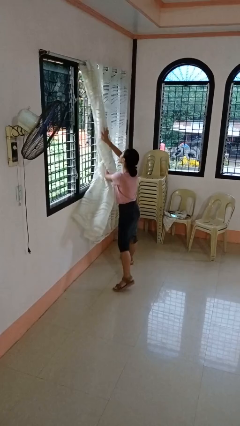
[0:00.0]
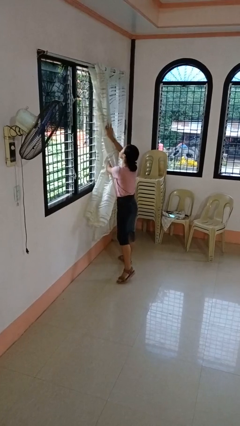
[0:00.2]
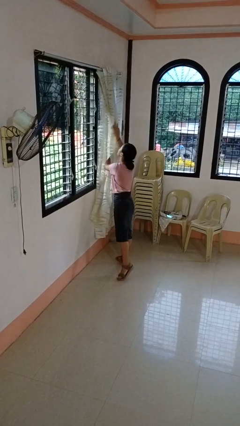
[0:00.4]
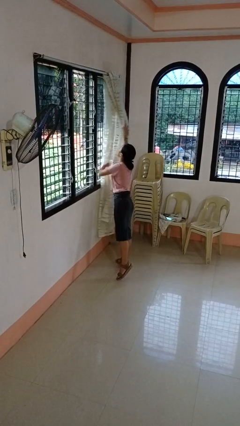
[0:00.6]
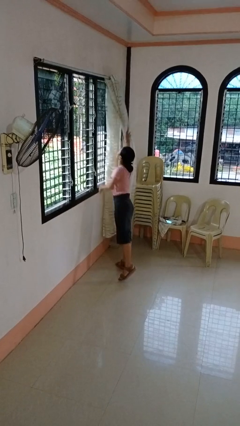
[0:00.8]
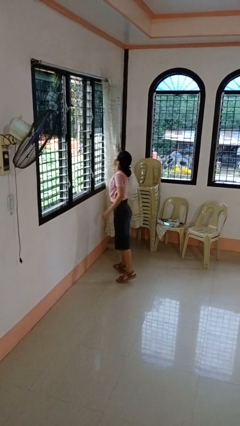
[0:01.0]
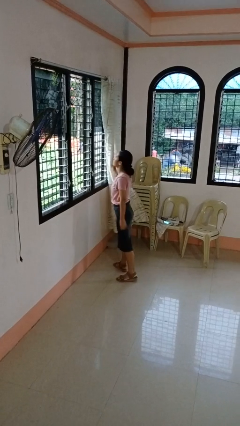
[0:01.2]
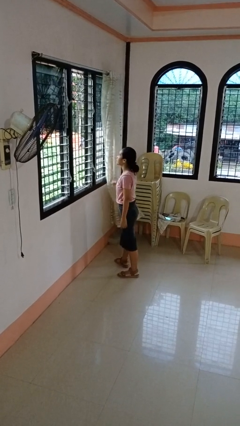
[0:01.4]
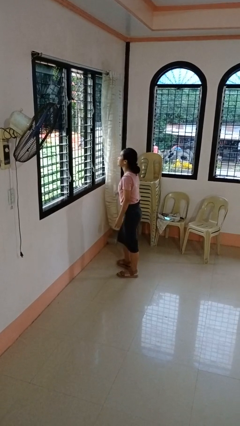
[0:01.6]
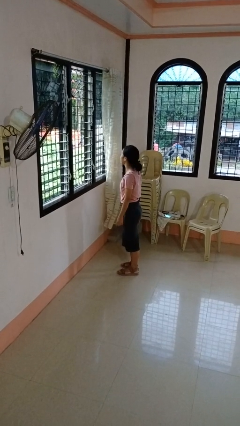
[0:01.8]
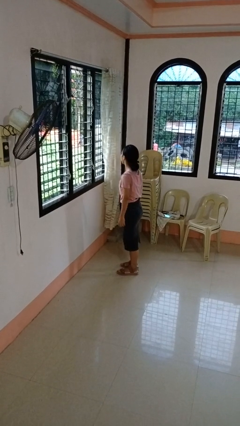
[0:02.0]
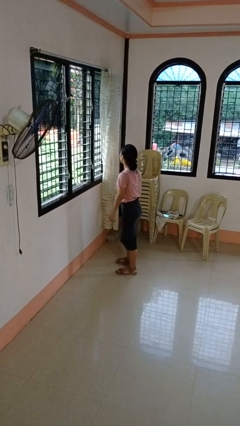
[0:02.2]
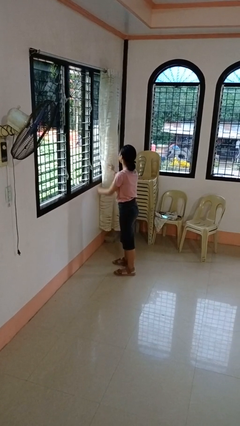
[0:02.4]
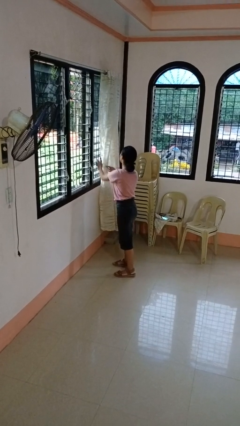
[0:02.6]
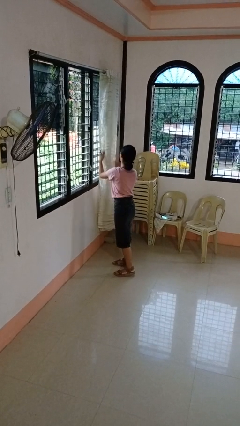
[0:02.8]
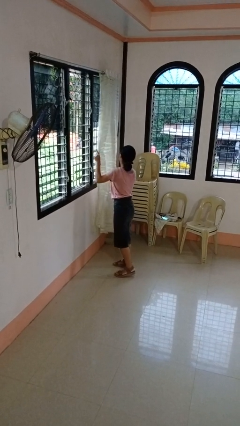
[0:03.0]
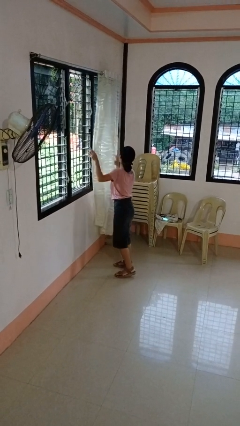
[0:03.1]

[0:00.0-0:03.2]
person opens curtains

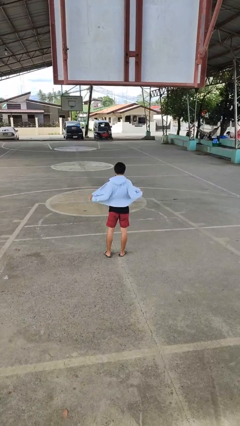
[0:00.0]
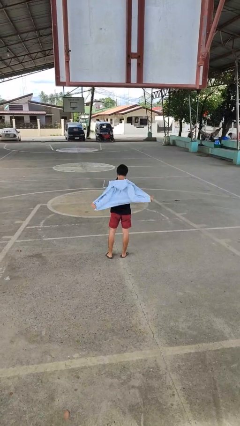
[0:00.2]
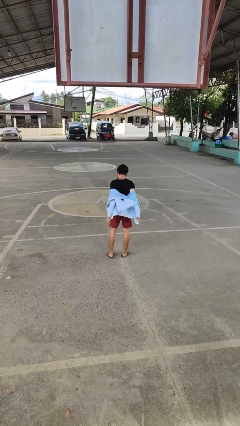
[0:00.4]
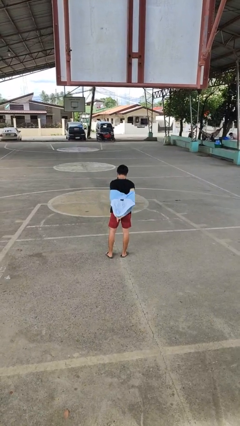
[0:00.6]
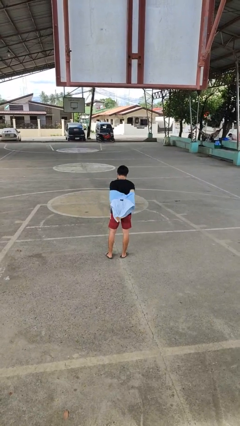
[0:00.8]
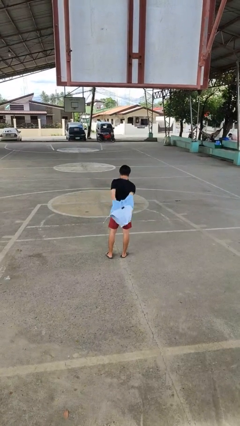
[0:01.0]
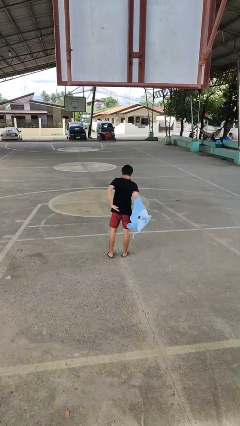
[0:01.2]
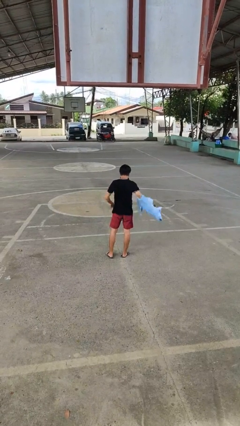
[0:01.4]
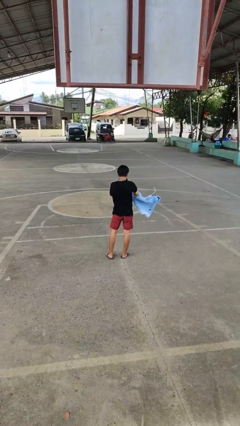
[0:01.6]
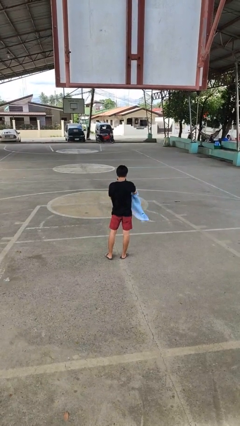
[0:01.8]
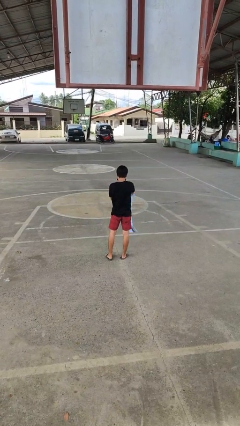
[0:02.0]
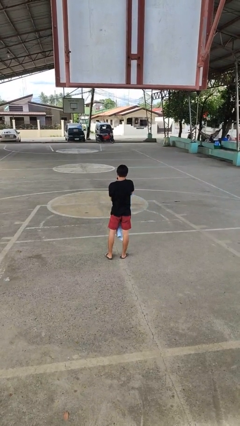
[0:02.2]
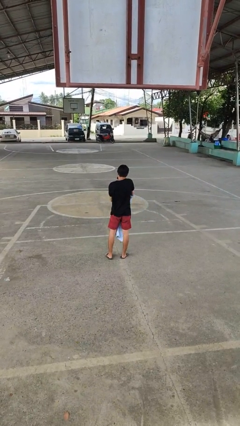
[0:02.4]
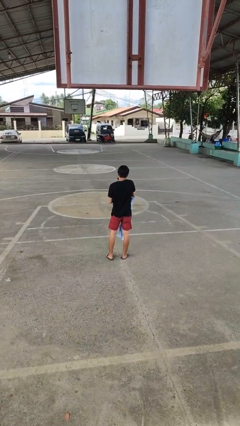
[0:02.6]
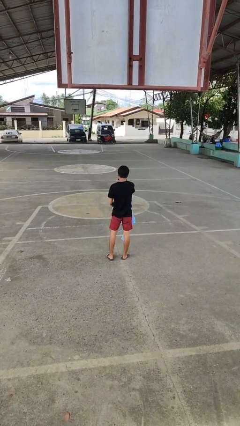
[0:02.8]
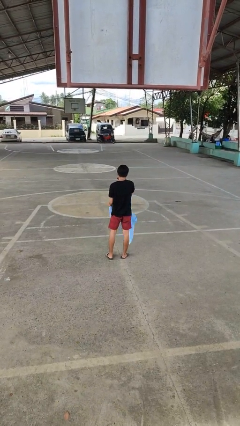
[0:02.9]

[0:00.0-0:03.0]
person takes off jacket

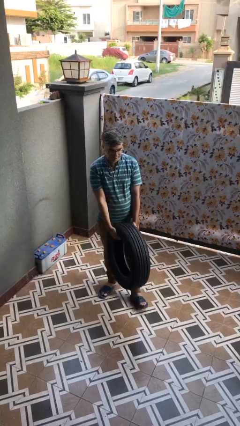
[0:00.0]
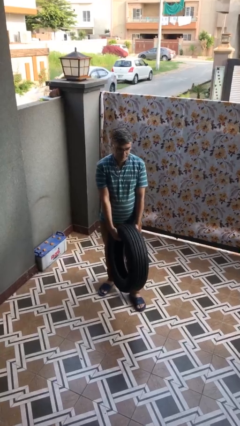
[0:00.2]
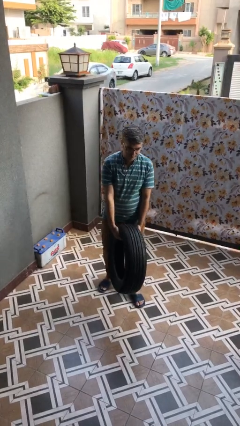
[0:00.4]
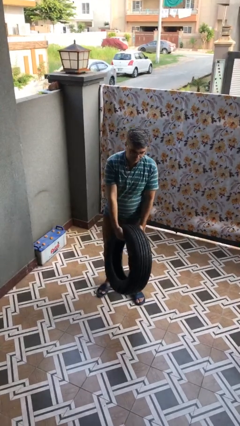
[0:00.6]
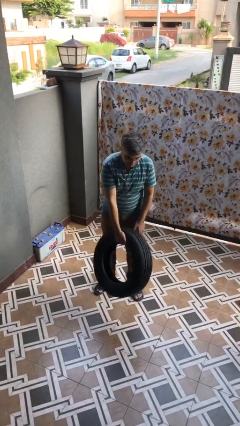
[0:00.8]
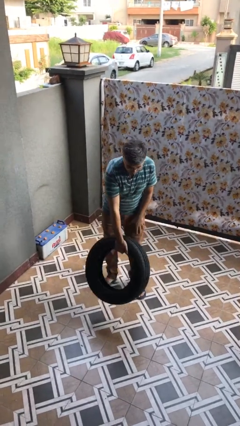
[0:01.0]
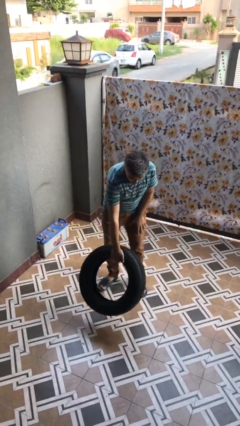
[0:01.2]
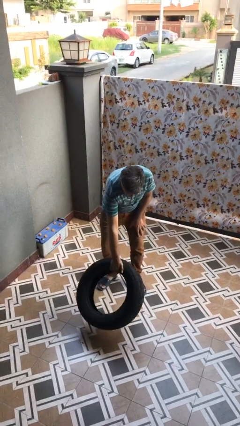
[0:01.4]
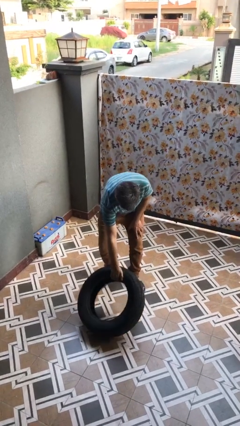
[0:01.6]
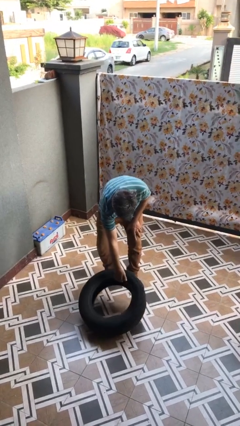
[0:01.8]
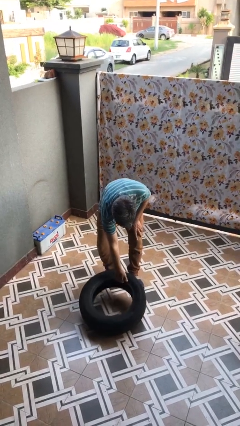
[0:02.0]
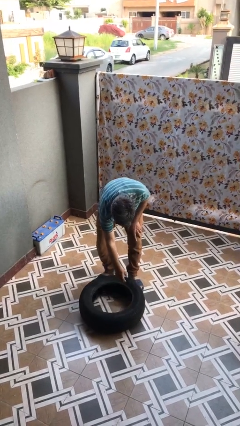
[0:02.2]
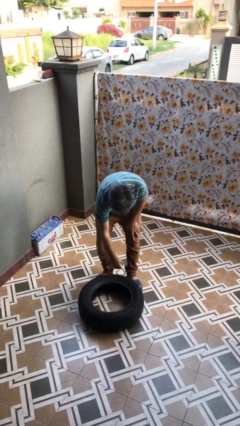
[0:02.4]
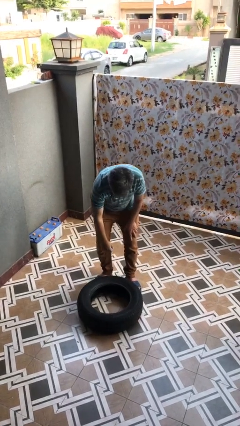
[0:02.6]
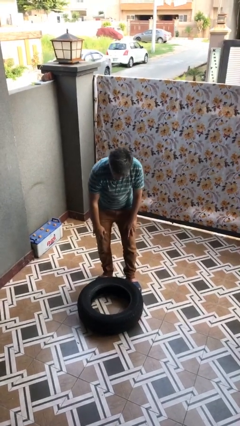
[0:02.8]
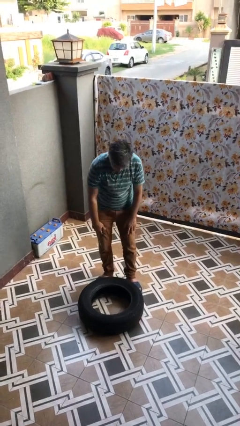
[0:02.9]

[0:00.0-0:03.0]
person puts down object on floor

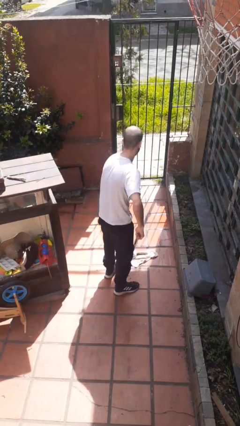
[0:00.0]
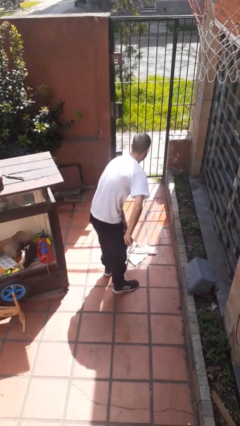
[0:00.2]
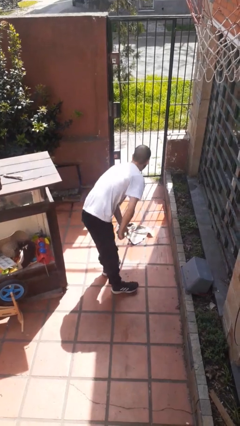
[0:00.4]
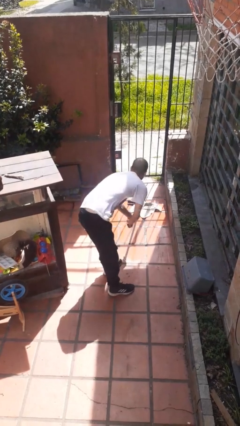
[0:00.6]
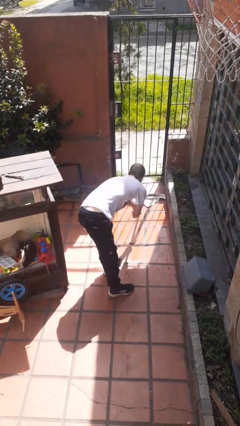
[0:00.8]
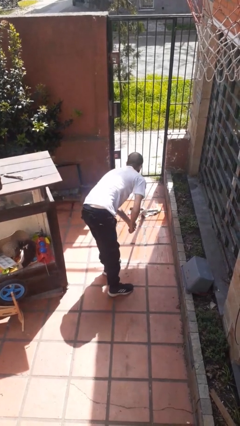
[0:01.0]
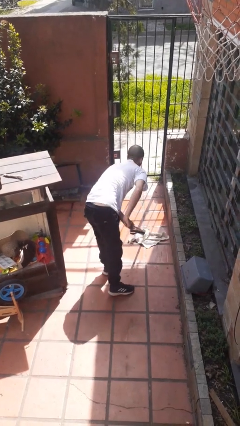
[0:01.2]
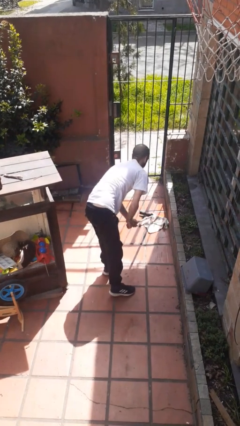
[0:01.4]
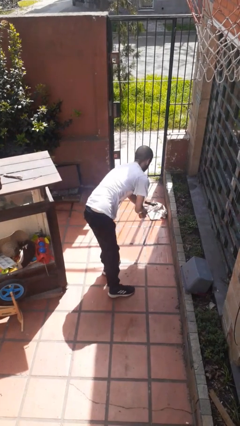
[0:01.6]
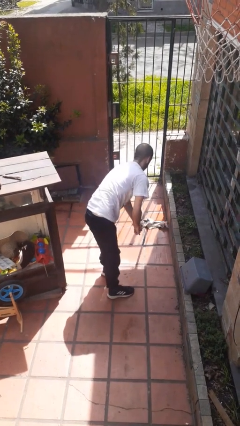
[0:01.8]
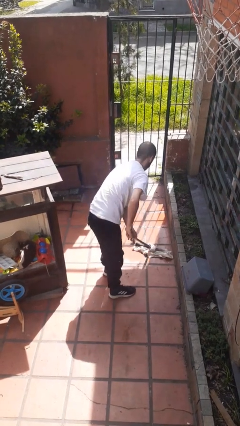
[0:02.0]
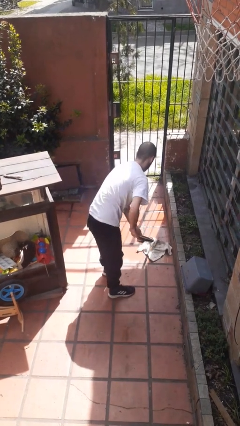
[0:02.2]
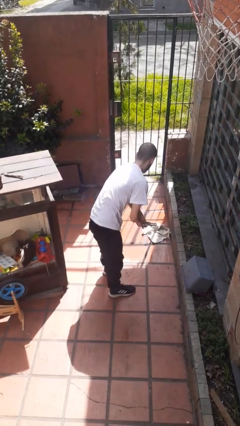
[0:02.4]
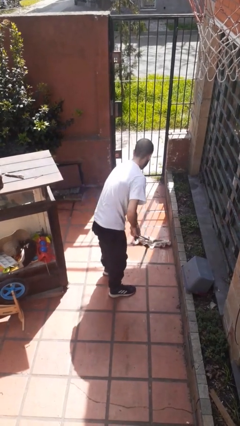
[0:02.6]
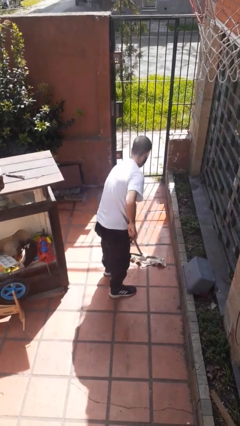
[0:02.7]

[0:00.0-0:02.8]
person mops

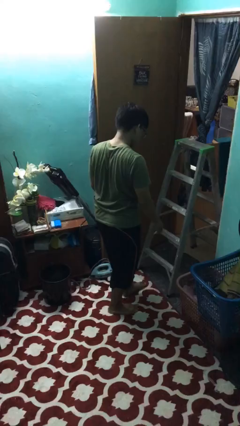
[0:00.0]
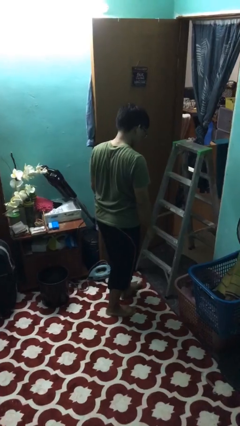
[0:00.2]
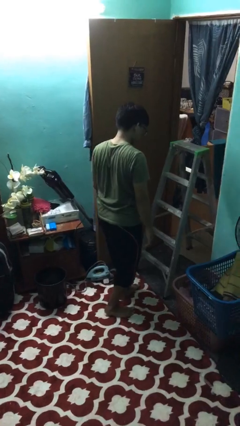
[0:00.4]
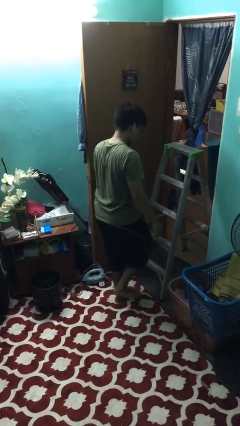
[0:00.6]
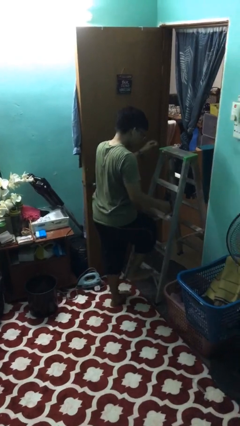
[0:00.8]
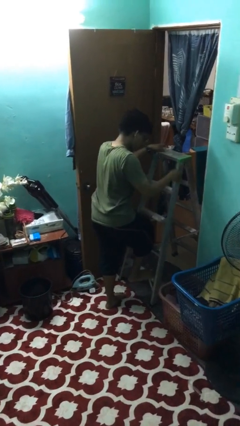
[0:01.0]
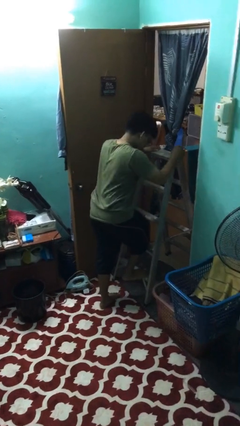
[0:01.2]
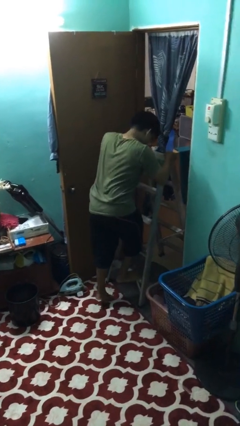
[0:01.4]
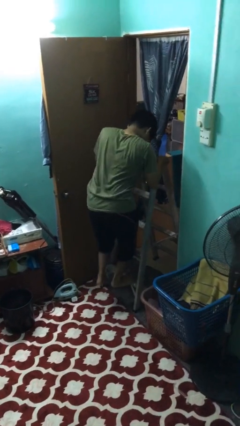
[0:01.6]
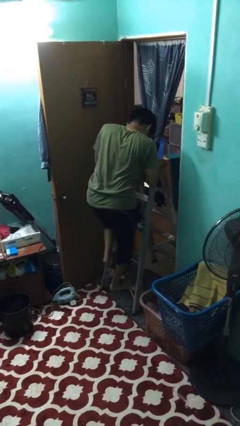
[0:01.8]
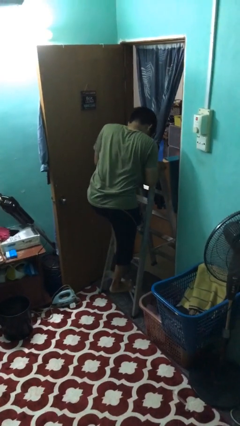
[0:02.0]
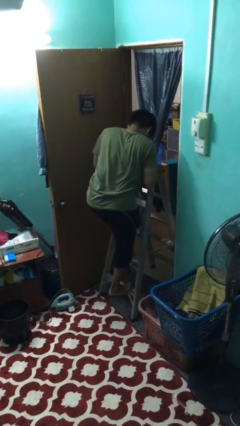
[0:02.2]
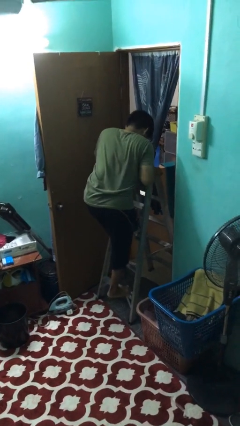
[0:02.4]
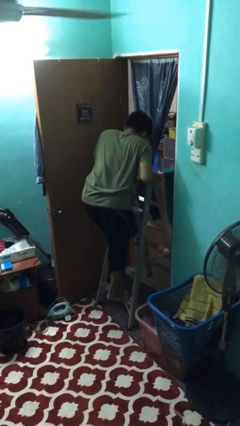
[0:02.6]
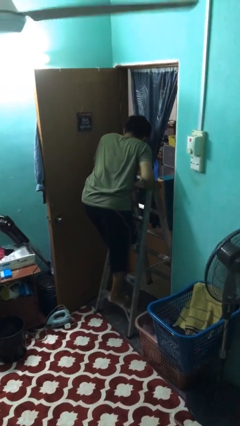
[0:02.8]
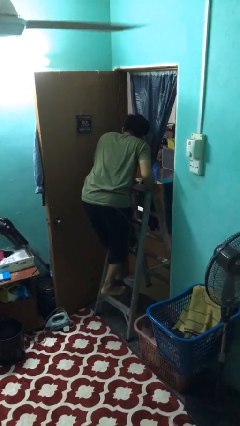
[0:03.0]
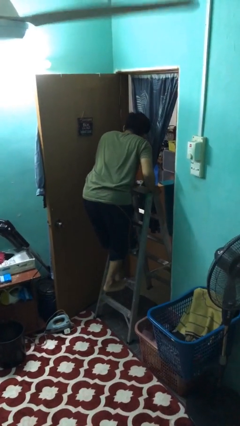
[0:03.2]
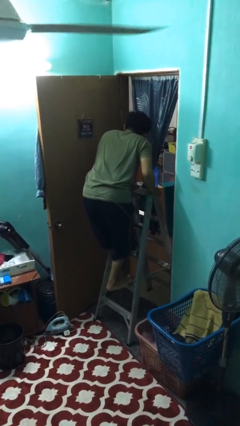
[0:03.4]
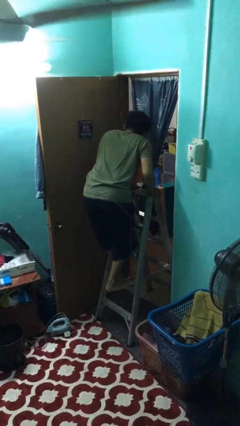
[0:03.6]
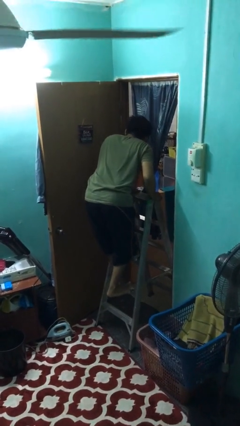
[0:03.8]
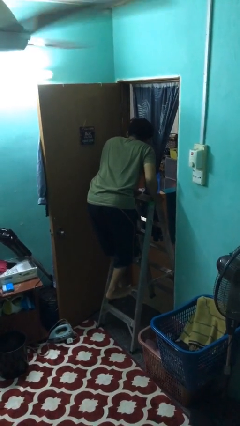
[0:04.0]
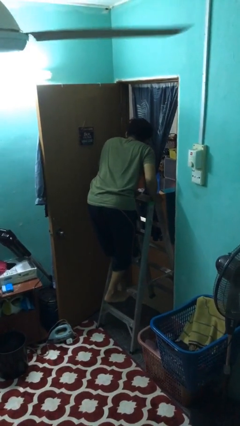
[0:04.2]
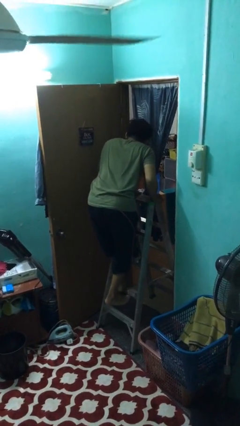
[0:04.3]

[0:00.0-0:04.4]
person climbs up ladder

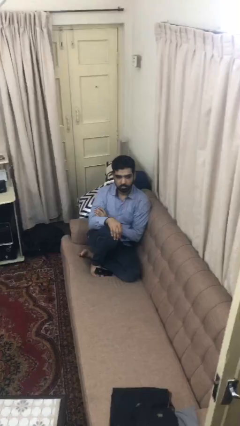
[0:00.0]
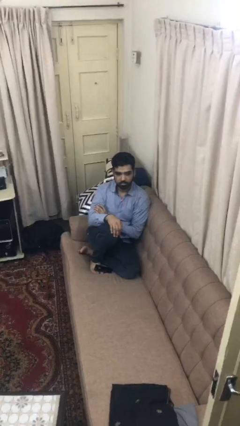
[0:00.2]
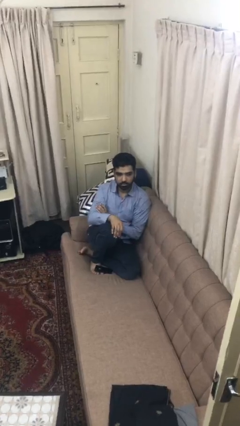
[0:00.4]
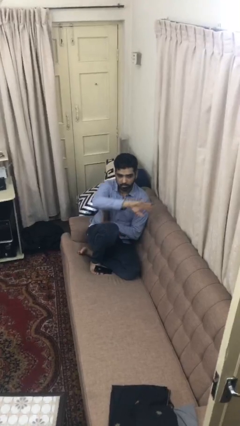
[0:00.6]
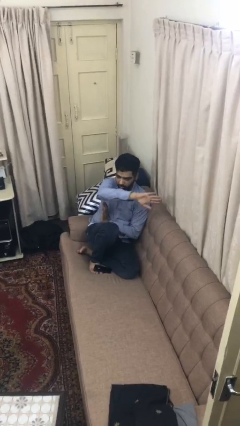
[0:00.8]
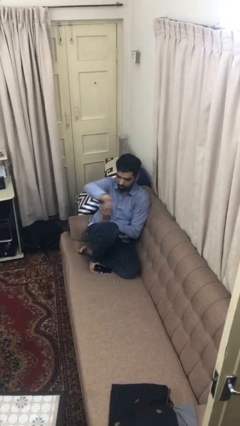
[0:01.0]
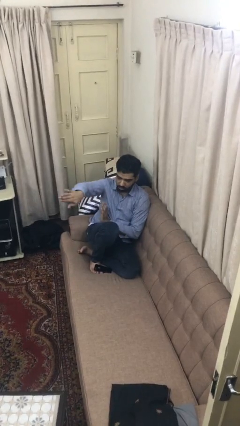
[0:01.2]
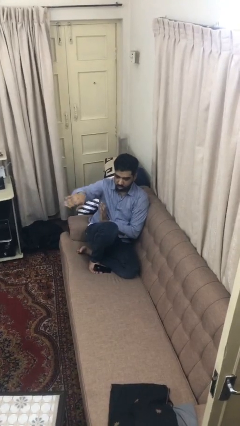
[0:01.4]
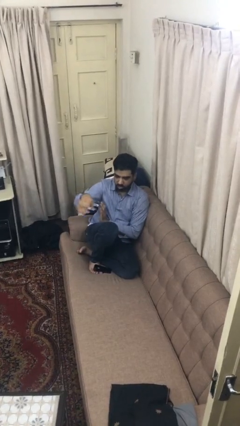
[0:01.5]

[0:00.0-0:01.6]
person gestures swipe right
